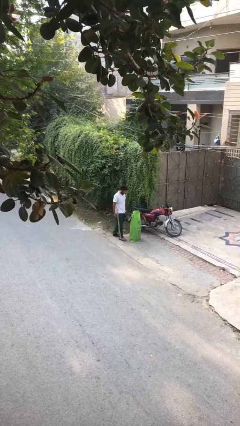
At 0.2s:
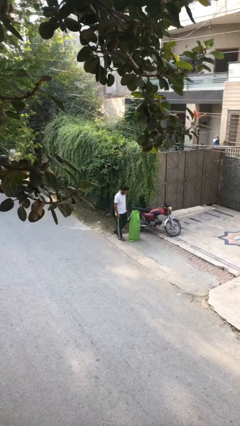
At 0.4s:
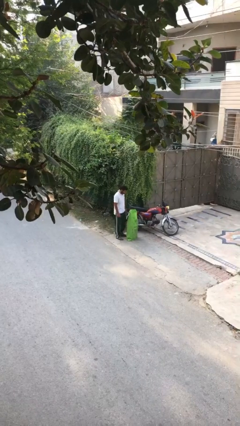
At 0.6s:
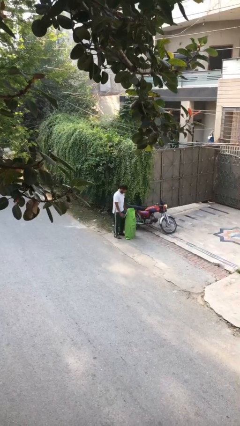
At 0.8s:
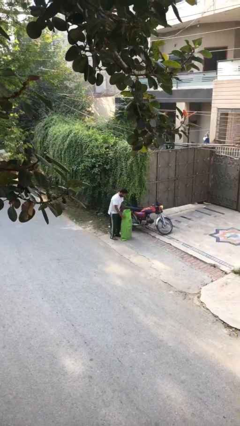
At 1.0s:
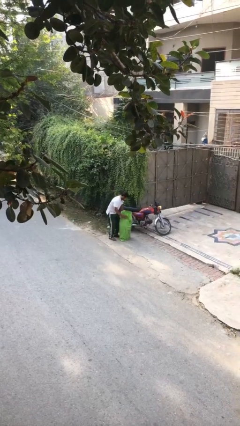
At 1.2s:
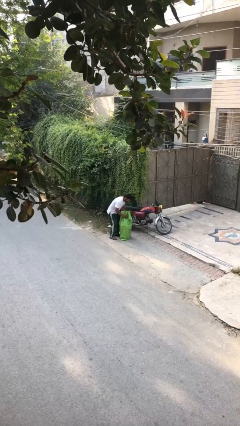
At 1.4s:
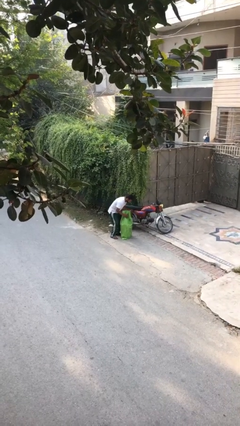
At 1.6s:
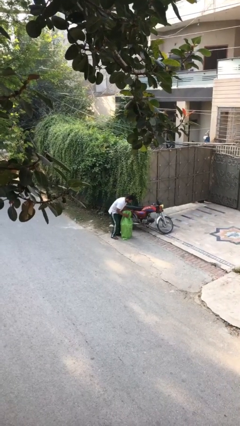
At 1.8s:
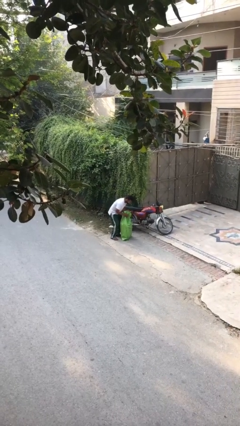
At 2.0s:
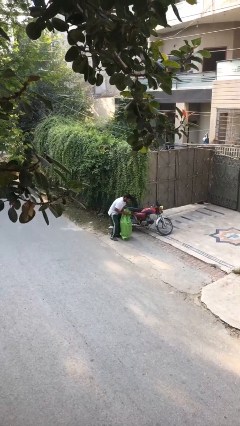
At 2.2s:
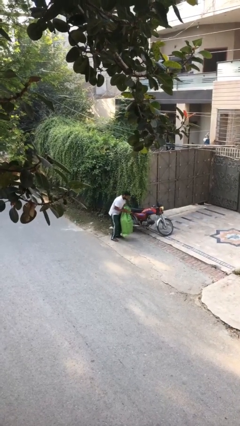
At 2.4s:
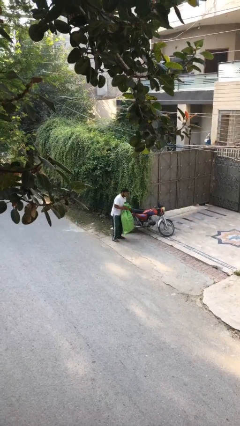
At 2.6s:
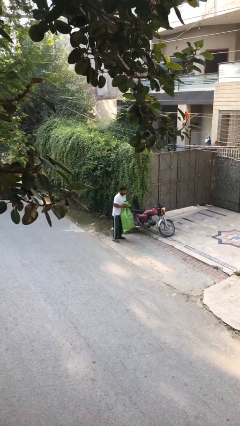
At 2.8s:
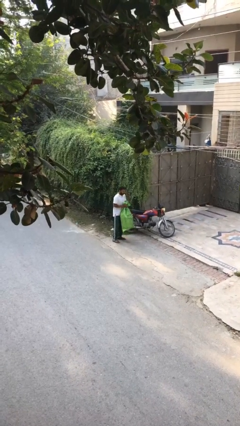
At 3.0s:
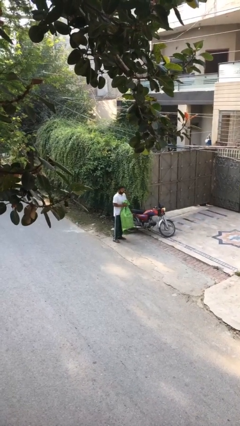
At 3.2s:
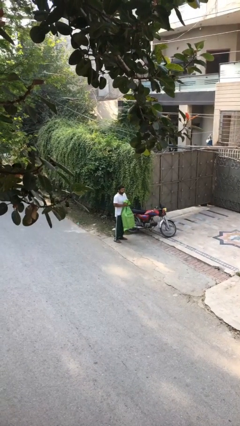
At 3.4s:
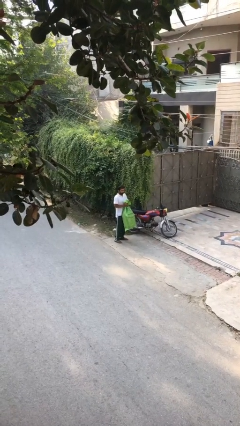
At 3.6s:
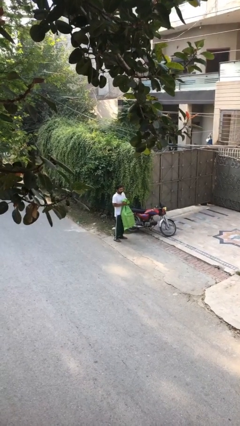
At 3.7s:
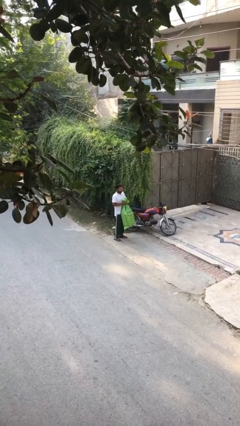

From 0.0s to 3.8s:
person picks up object from floor

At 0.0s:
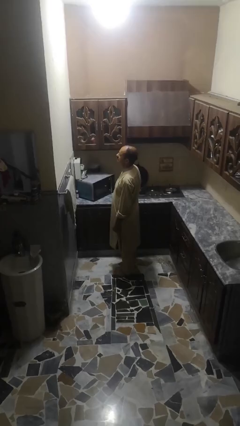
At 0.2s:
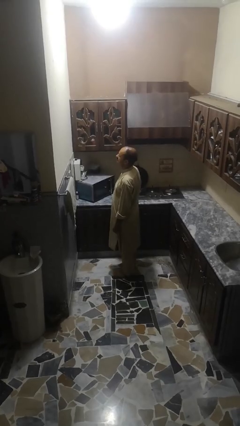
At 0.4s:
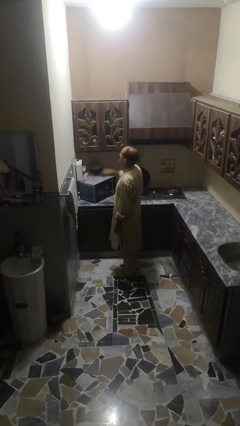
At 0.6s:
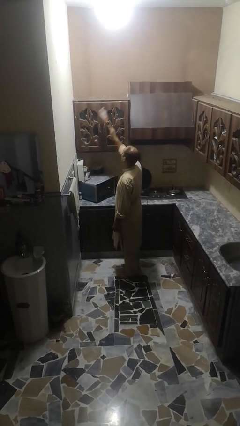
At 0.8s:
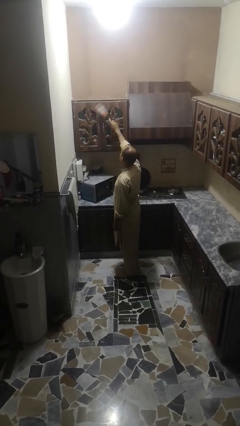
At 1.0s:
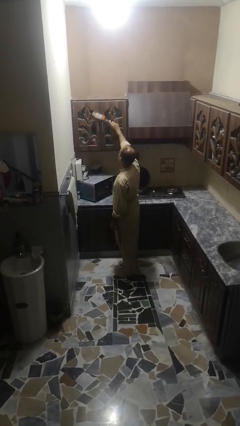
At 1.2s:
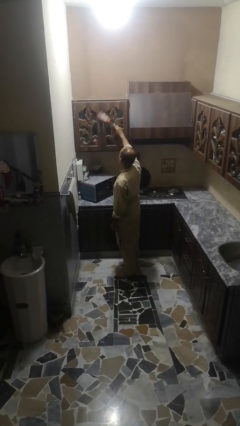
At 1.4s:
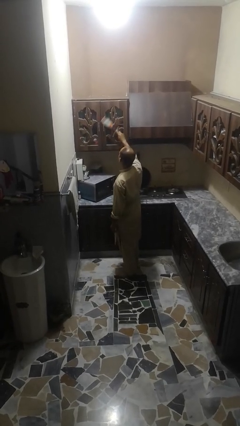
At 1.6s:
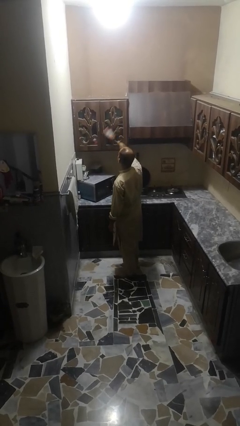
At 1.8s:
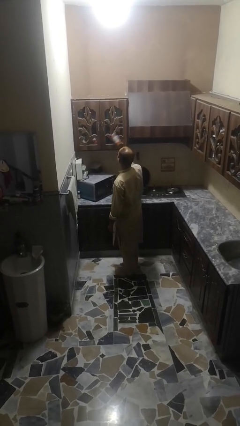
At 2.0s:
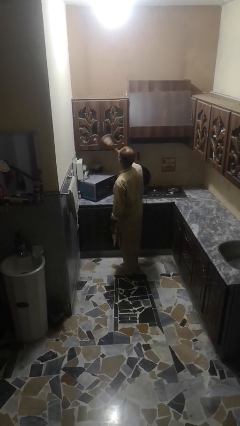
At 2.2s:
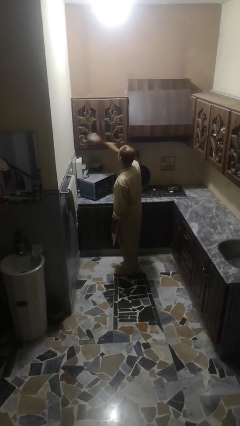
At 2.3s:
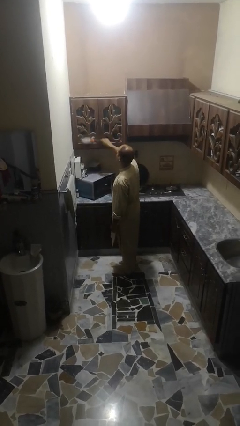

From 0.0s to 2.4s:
person dusts furniture

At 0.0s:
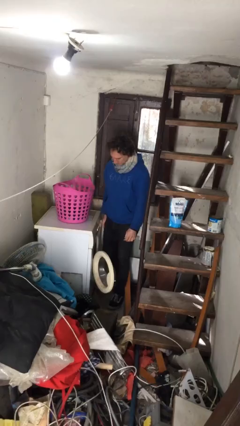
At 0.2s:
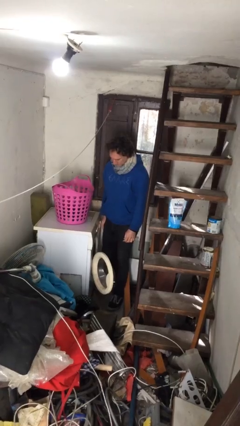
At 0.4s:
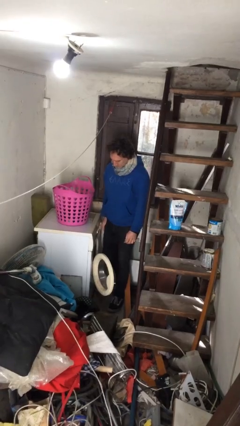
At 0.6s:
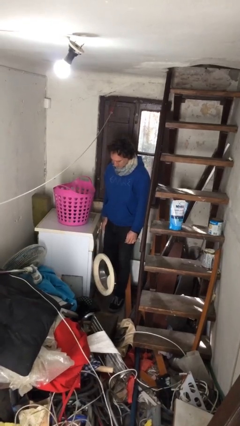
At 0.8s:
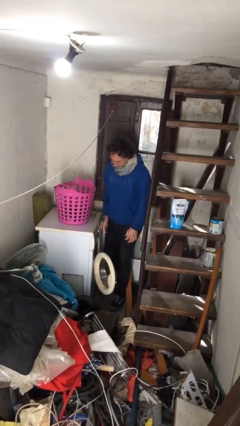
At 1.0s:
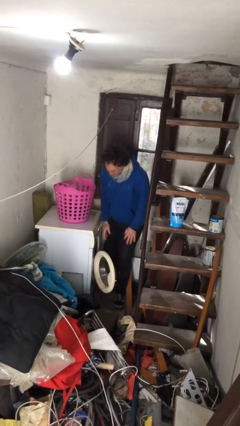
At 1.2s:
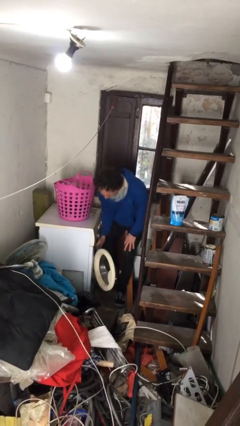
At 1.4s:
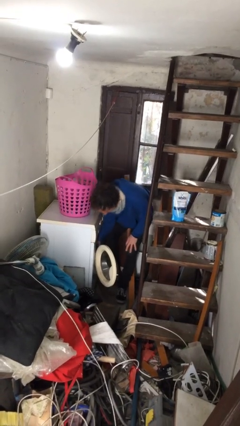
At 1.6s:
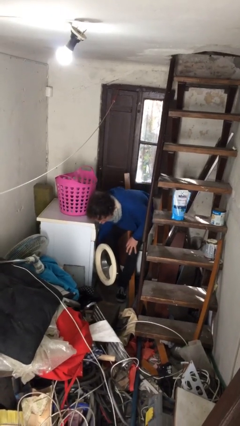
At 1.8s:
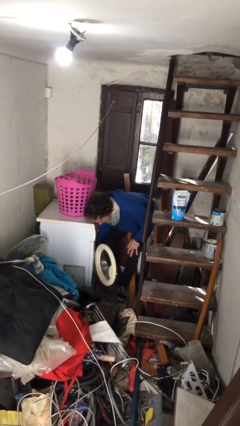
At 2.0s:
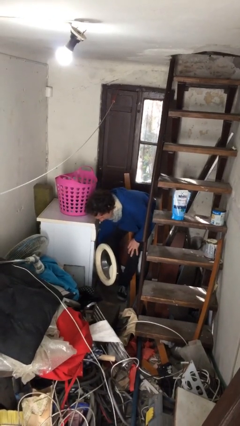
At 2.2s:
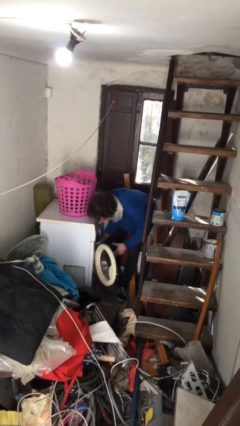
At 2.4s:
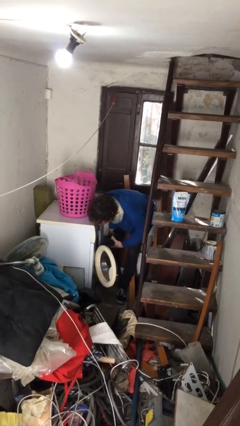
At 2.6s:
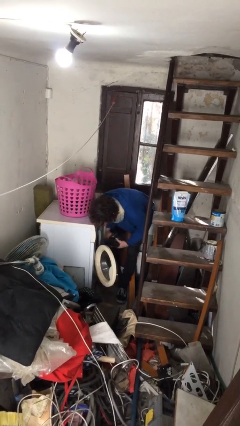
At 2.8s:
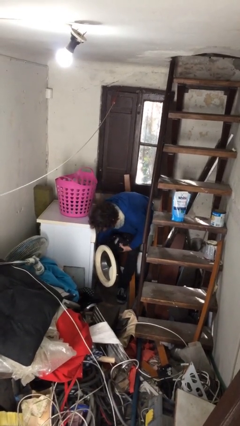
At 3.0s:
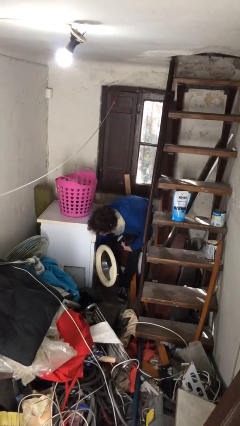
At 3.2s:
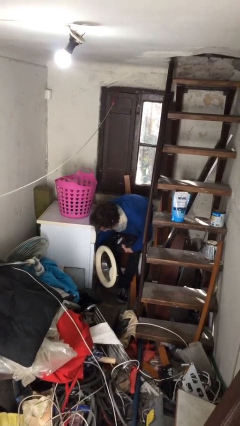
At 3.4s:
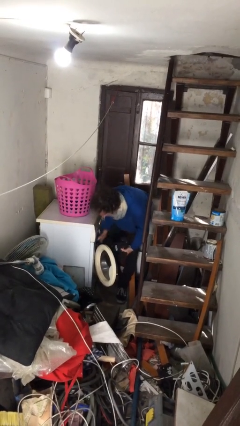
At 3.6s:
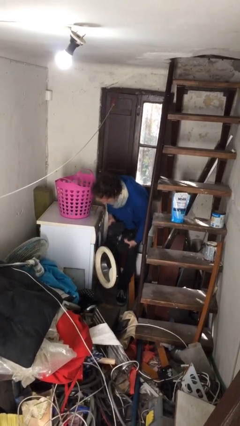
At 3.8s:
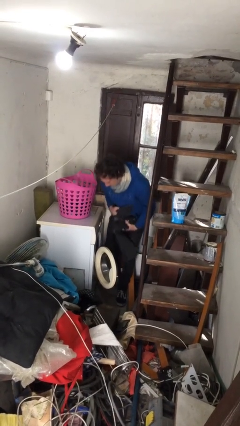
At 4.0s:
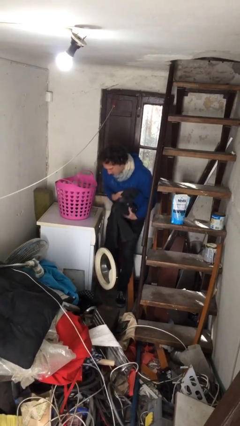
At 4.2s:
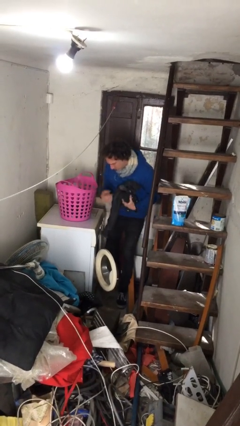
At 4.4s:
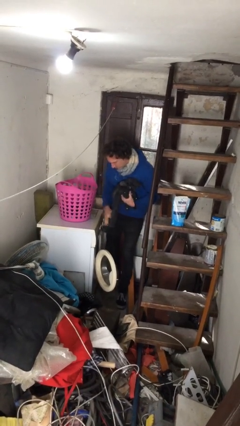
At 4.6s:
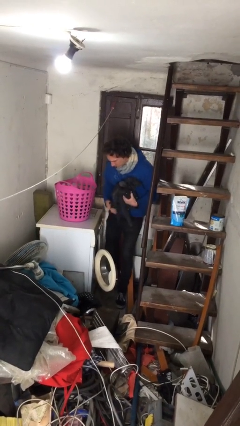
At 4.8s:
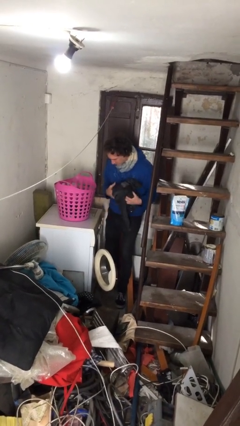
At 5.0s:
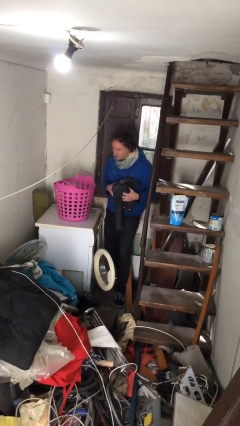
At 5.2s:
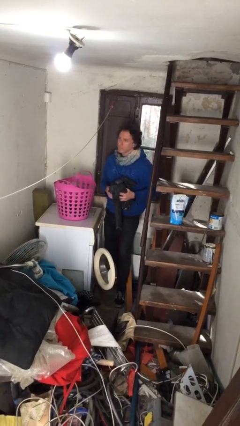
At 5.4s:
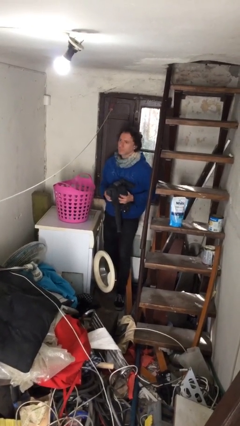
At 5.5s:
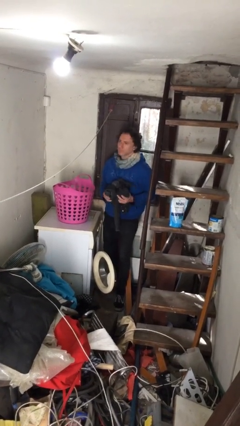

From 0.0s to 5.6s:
person loads clotheswasher

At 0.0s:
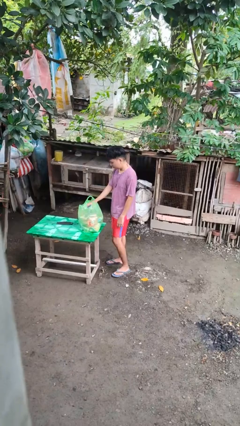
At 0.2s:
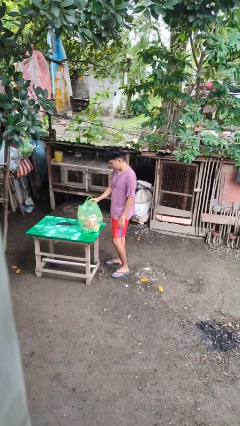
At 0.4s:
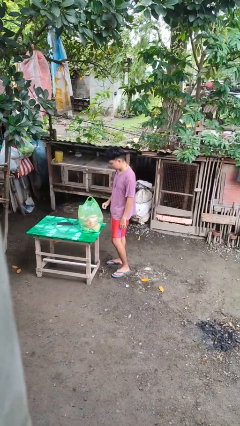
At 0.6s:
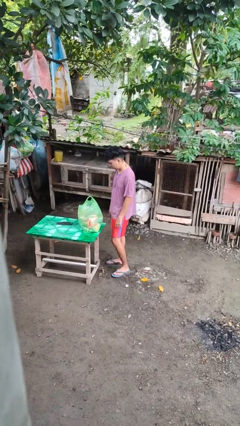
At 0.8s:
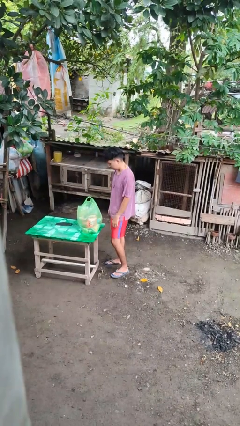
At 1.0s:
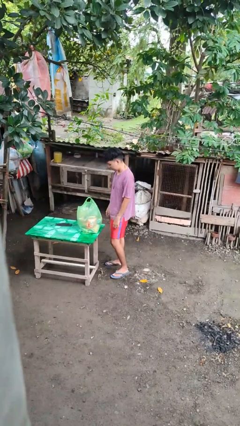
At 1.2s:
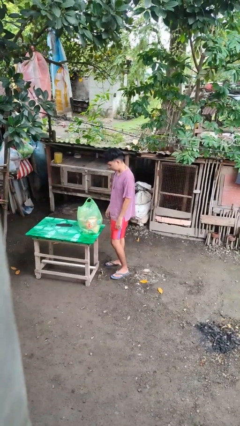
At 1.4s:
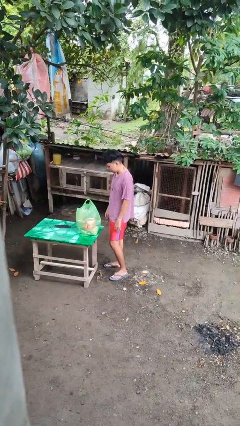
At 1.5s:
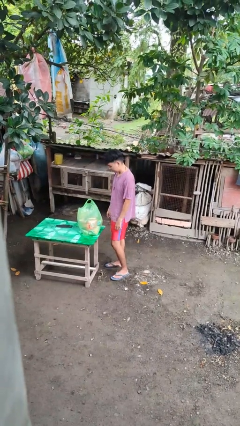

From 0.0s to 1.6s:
person puts object into bag

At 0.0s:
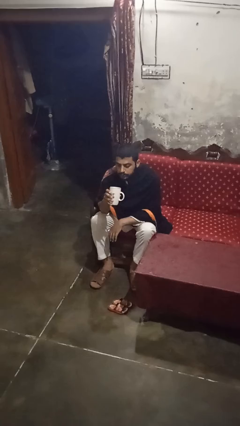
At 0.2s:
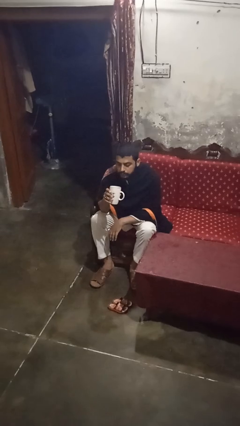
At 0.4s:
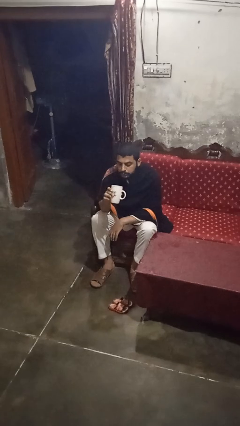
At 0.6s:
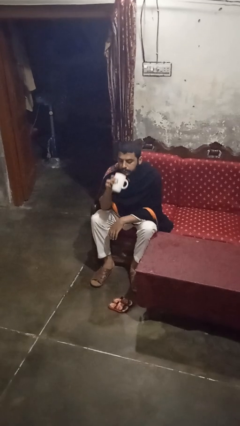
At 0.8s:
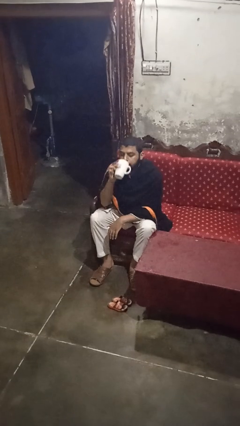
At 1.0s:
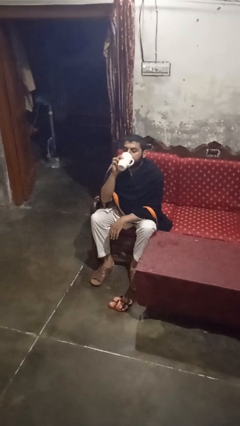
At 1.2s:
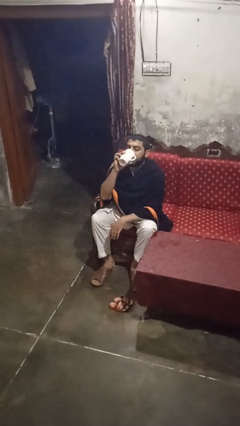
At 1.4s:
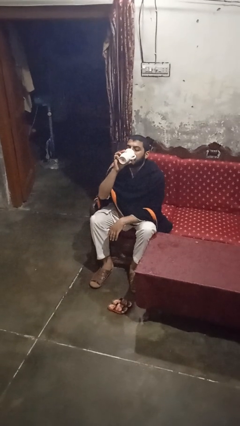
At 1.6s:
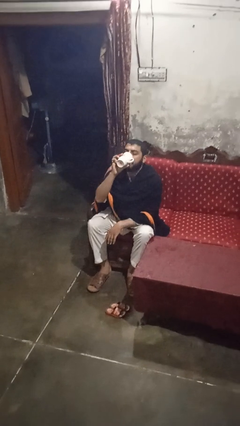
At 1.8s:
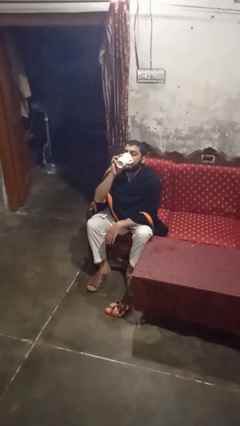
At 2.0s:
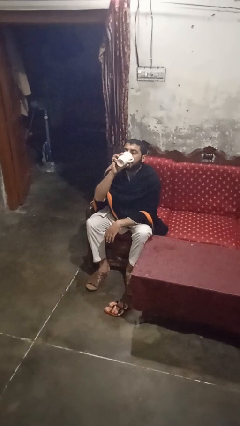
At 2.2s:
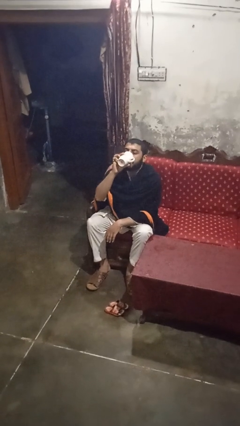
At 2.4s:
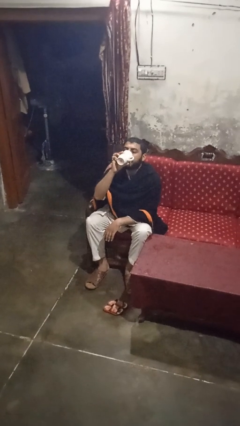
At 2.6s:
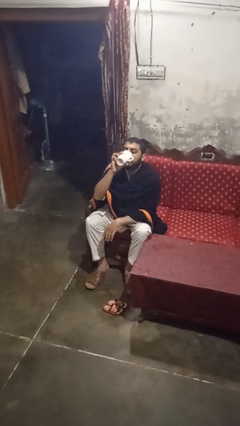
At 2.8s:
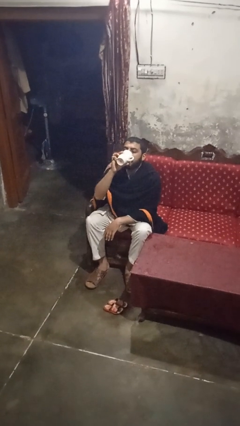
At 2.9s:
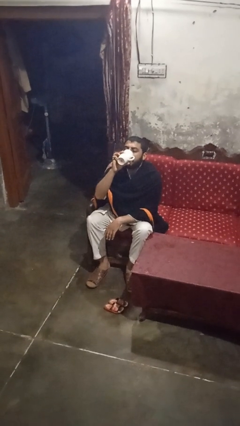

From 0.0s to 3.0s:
person drinks from mug

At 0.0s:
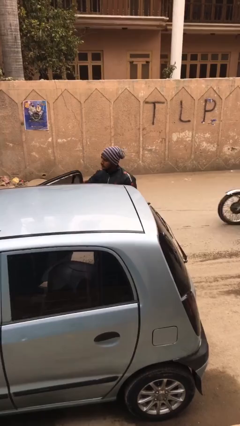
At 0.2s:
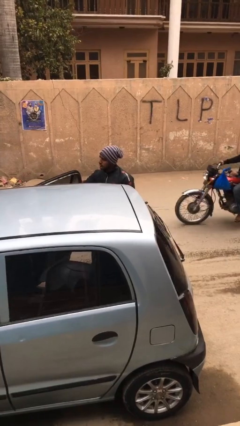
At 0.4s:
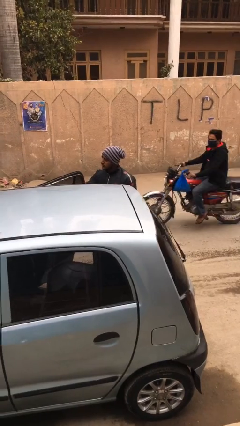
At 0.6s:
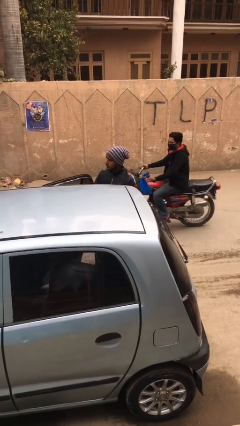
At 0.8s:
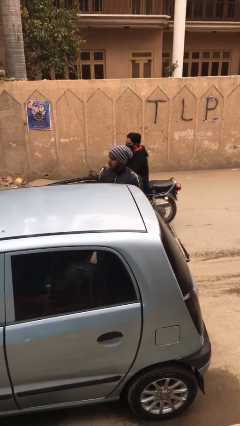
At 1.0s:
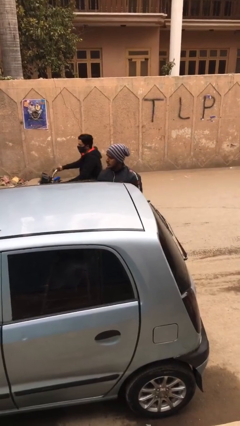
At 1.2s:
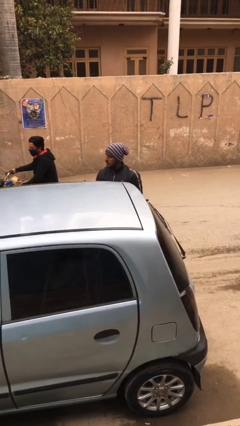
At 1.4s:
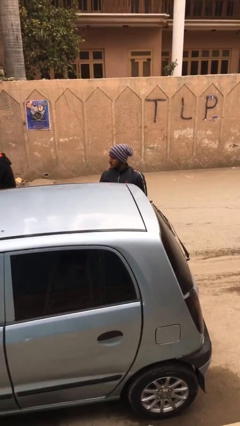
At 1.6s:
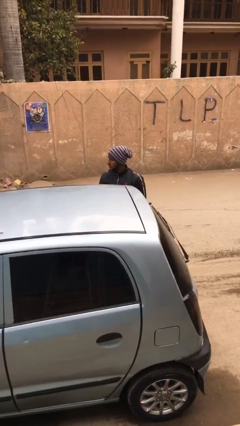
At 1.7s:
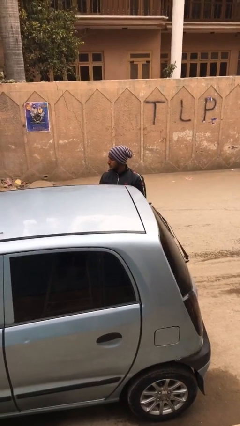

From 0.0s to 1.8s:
person closes car door
